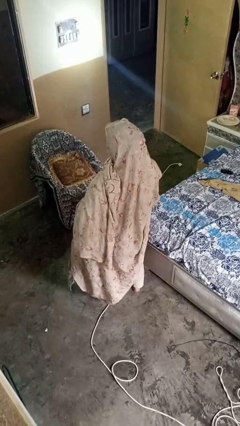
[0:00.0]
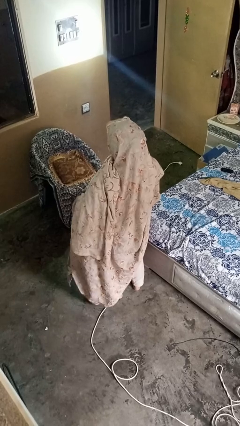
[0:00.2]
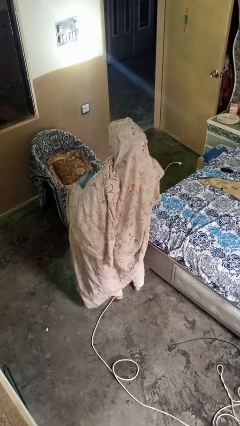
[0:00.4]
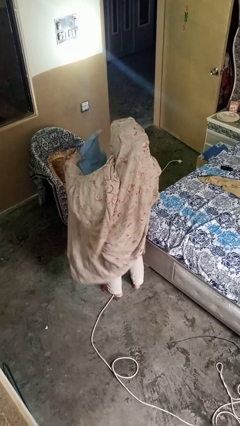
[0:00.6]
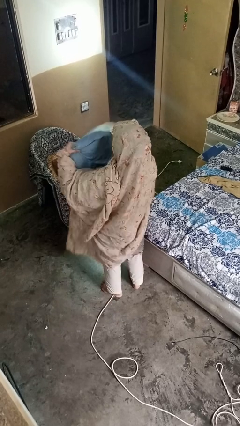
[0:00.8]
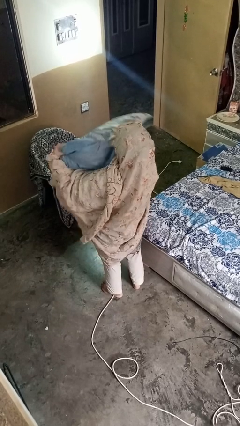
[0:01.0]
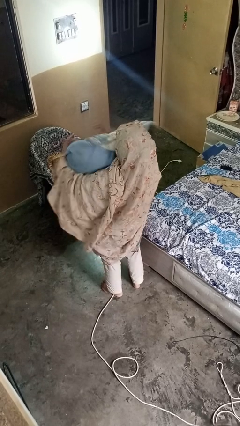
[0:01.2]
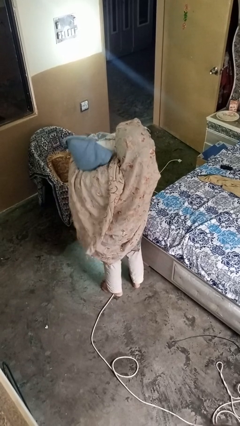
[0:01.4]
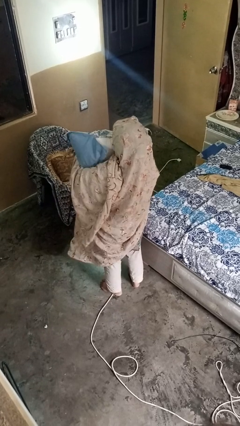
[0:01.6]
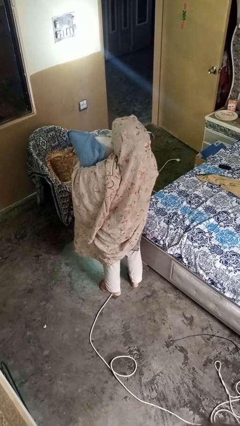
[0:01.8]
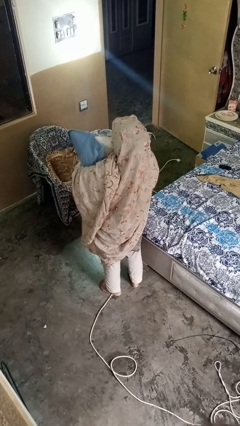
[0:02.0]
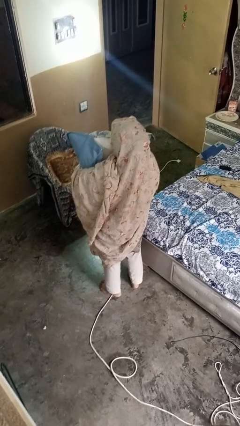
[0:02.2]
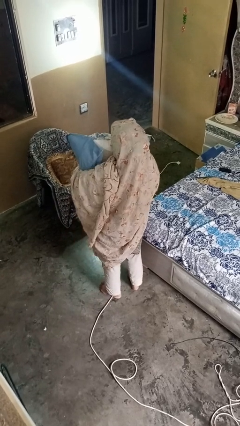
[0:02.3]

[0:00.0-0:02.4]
person squeezes object

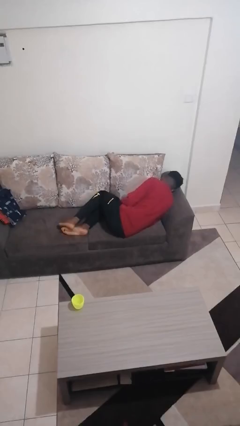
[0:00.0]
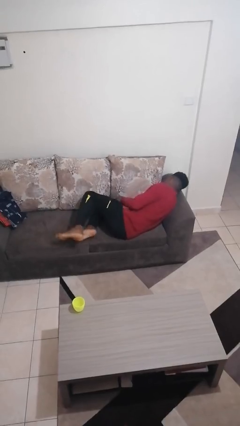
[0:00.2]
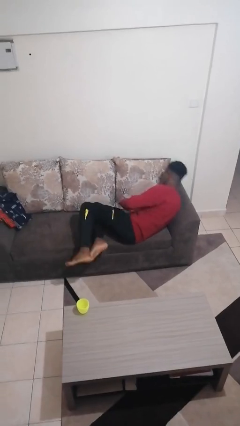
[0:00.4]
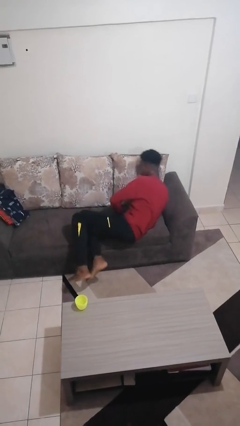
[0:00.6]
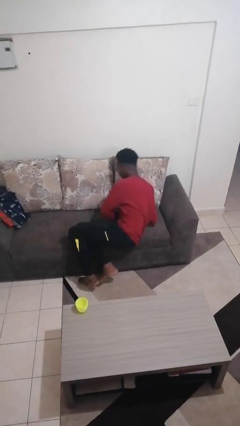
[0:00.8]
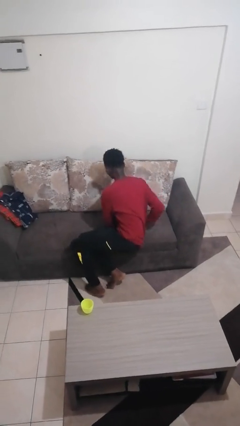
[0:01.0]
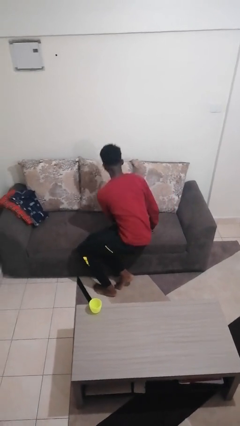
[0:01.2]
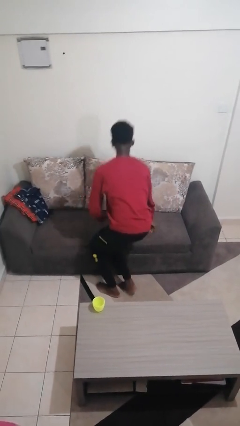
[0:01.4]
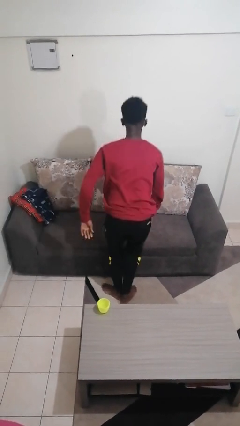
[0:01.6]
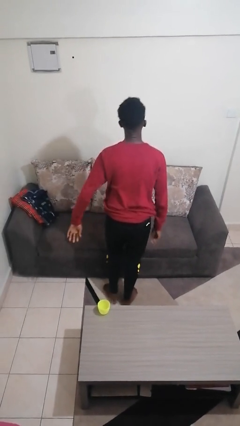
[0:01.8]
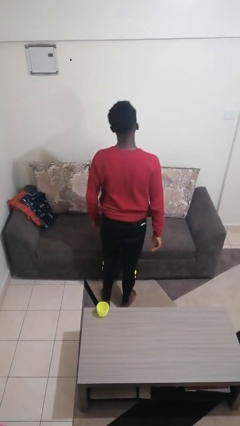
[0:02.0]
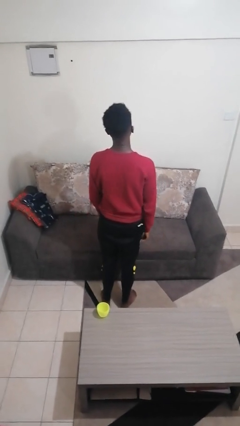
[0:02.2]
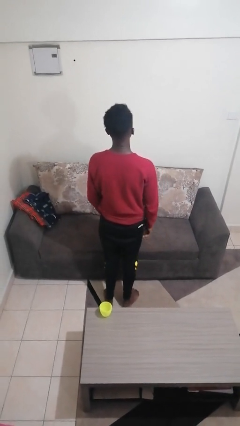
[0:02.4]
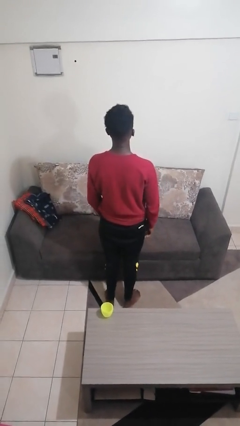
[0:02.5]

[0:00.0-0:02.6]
person stands up

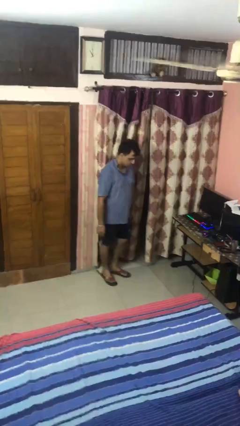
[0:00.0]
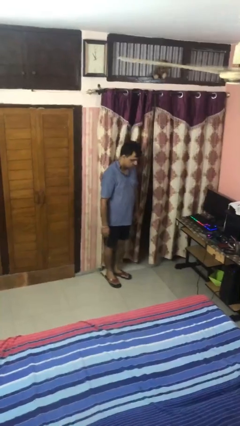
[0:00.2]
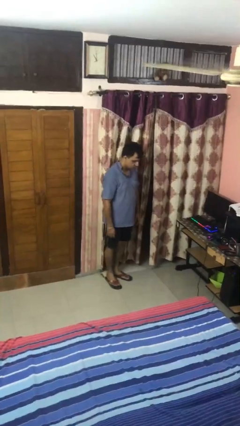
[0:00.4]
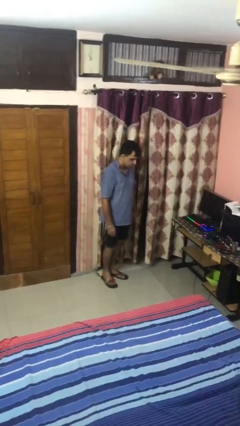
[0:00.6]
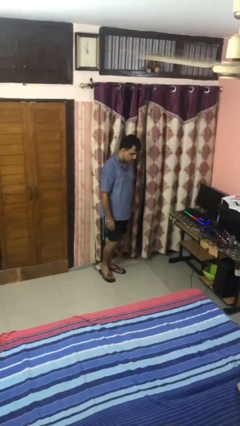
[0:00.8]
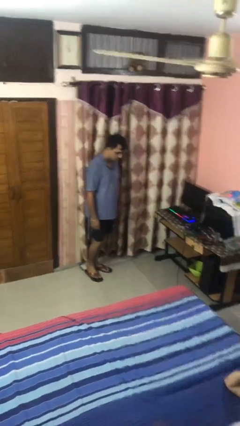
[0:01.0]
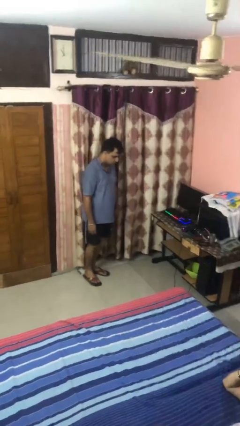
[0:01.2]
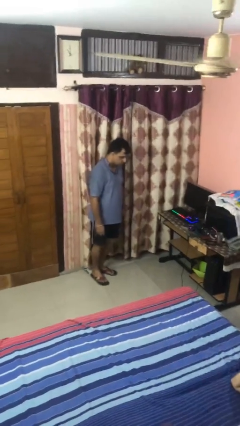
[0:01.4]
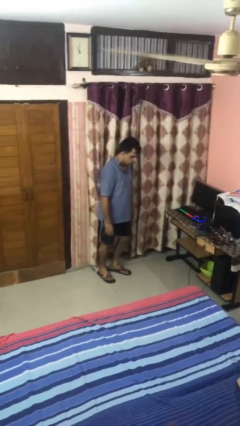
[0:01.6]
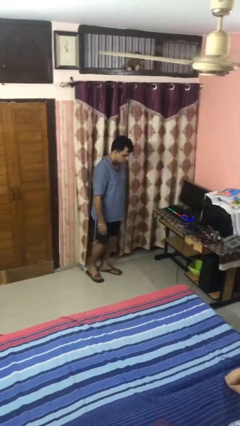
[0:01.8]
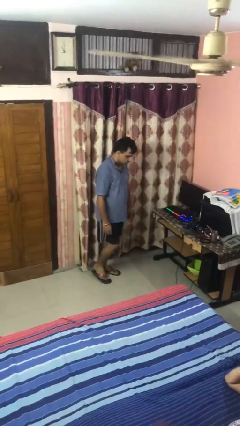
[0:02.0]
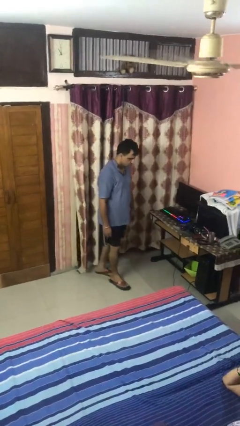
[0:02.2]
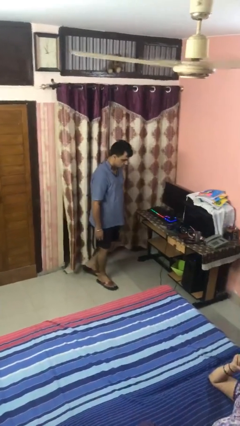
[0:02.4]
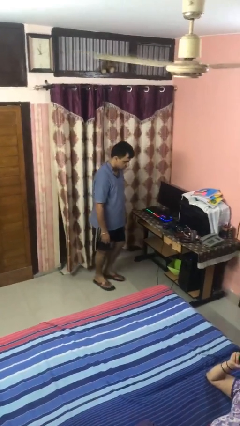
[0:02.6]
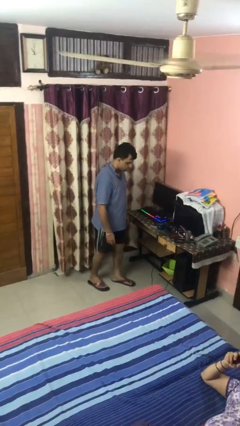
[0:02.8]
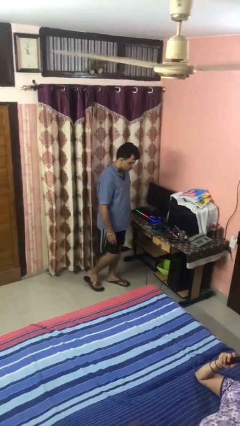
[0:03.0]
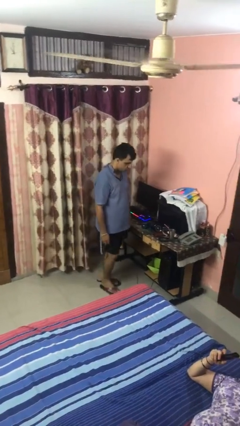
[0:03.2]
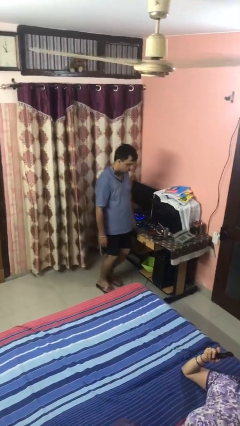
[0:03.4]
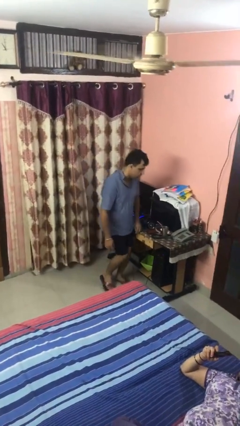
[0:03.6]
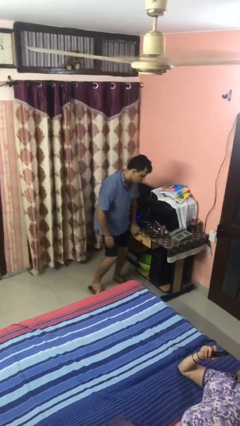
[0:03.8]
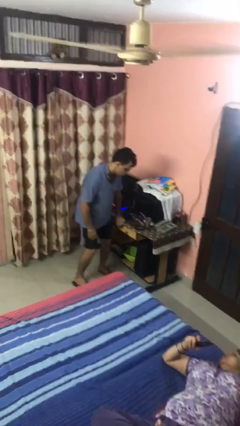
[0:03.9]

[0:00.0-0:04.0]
person bumps into table

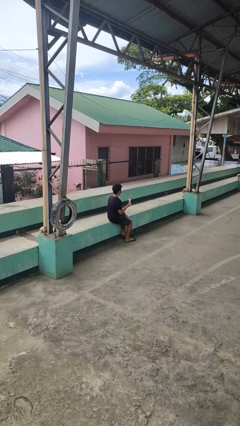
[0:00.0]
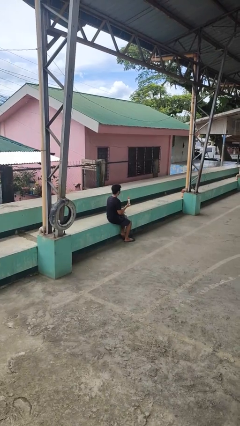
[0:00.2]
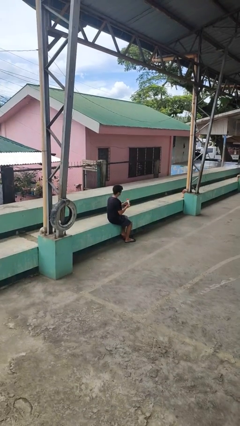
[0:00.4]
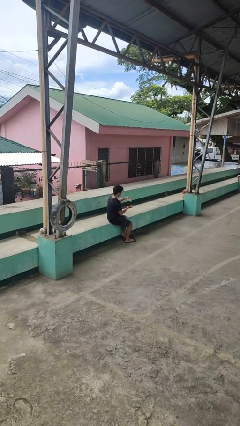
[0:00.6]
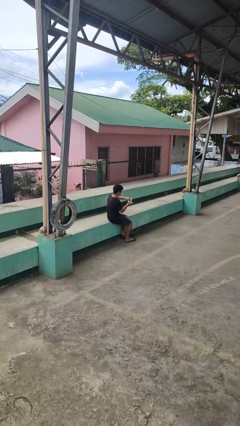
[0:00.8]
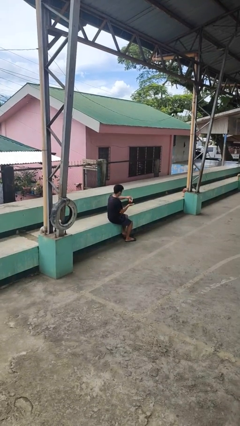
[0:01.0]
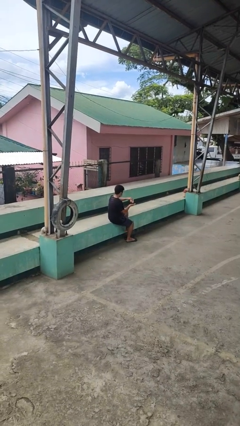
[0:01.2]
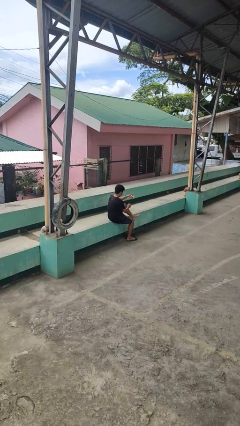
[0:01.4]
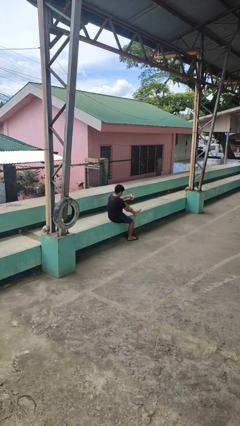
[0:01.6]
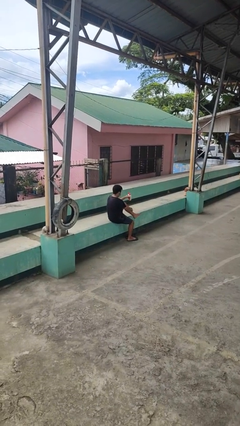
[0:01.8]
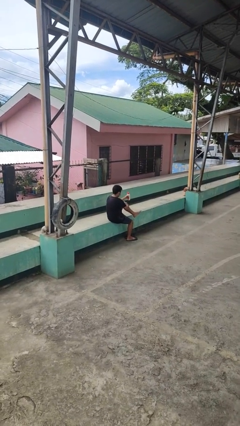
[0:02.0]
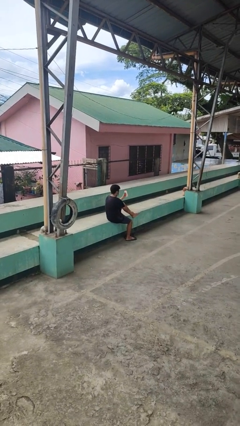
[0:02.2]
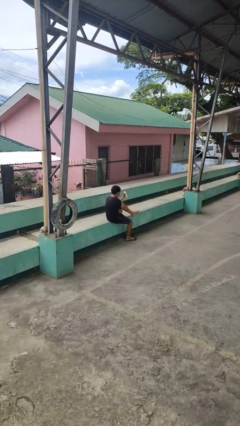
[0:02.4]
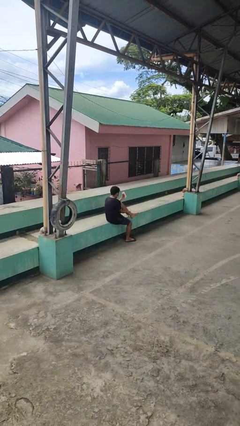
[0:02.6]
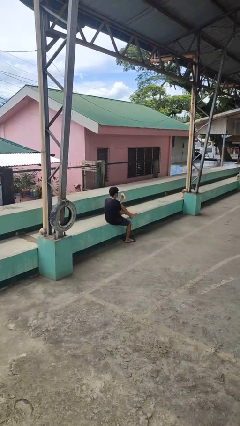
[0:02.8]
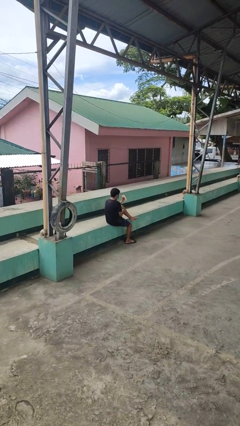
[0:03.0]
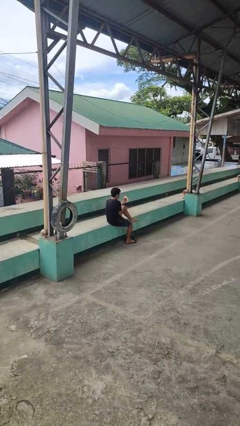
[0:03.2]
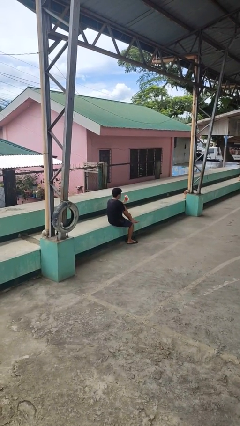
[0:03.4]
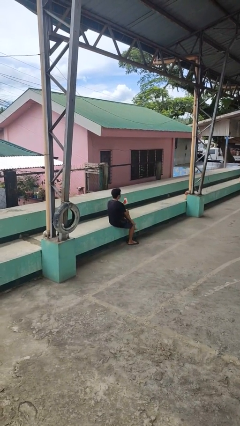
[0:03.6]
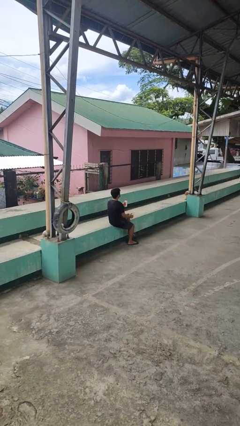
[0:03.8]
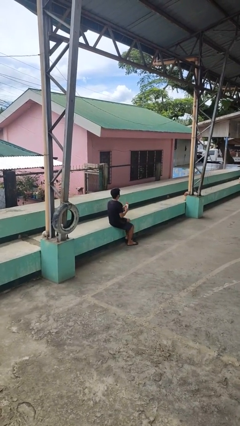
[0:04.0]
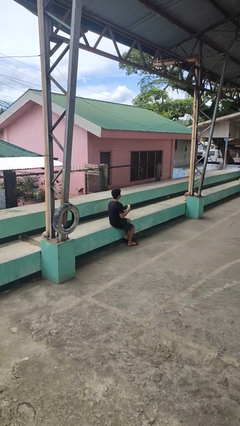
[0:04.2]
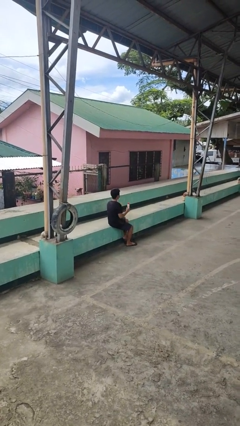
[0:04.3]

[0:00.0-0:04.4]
person applies sunscreen

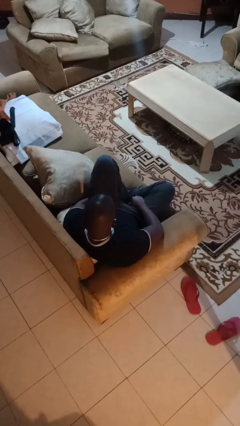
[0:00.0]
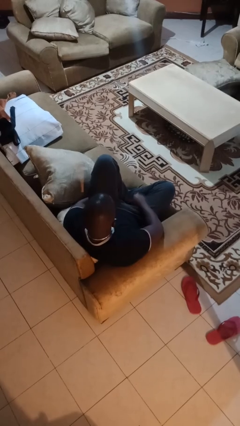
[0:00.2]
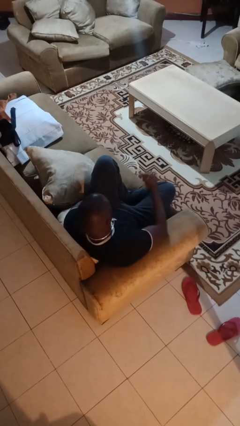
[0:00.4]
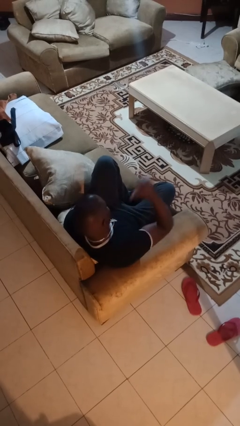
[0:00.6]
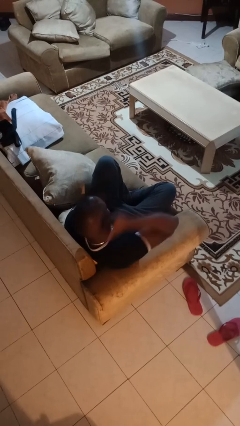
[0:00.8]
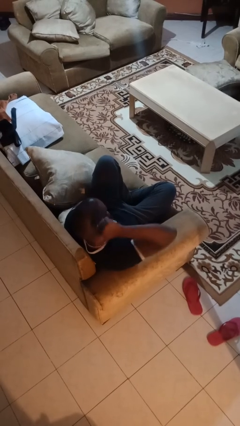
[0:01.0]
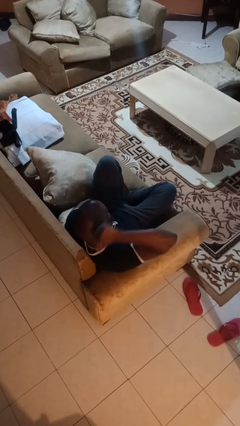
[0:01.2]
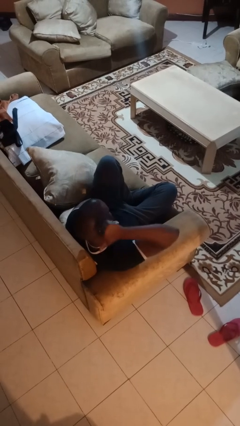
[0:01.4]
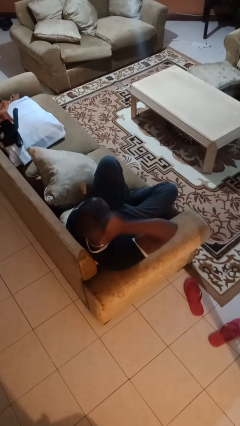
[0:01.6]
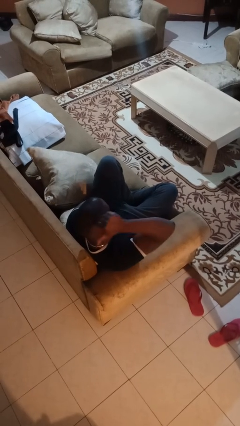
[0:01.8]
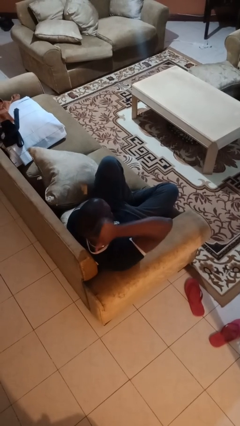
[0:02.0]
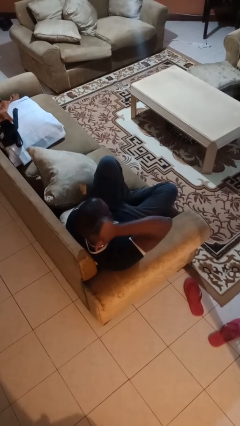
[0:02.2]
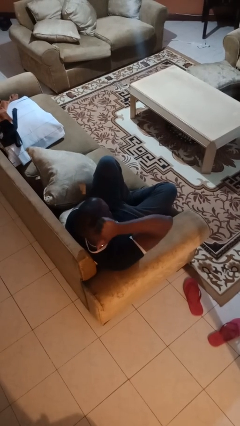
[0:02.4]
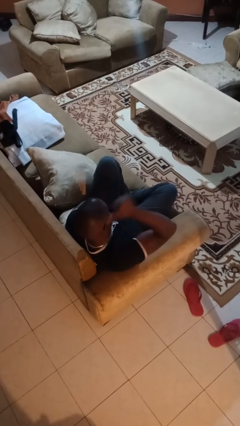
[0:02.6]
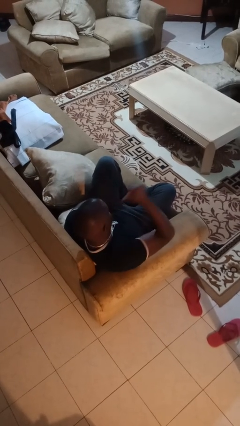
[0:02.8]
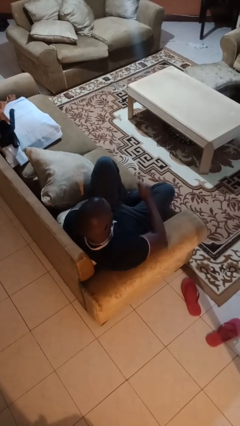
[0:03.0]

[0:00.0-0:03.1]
person gestures behind me

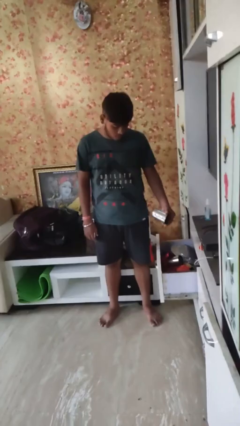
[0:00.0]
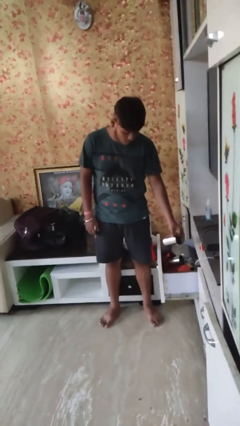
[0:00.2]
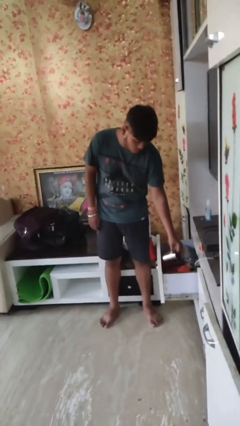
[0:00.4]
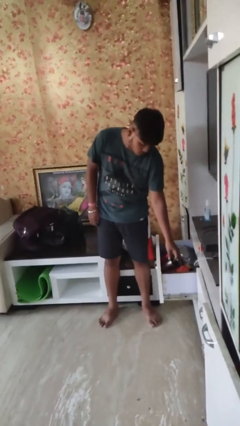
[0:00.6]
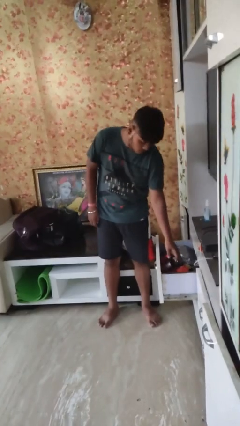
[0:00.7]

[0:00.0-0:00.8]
person puts object into kitchen drawer

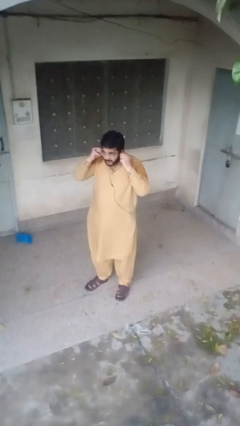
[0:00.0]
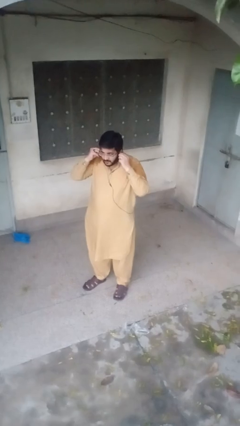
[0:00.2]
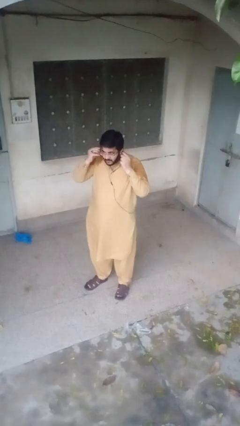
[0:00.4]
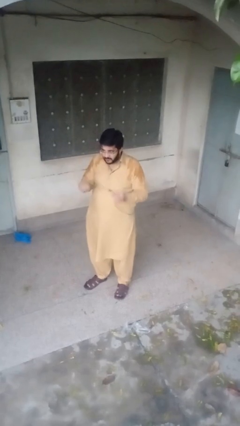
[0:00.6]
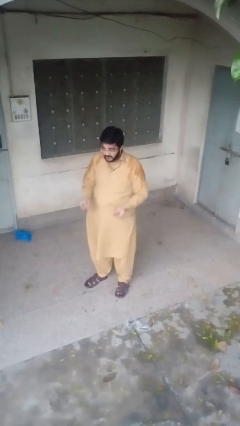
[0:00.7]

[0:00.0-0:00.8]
person takes off headphones
